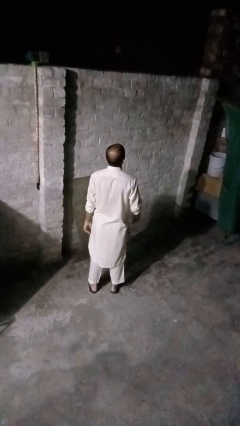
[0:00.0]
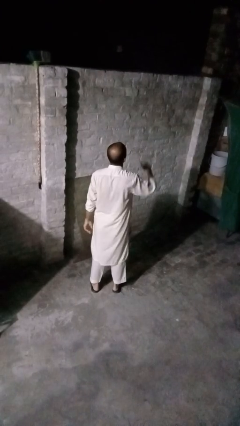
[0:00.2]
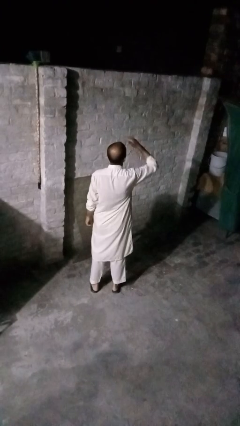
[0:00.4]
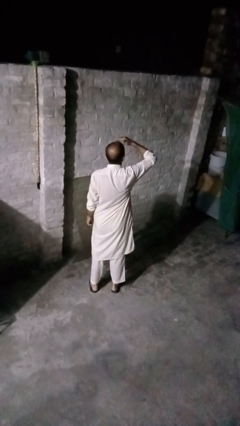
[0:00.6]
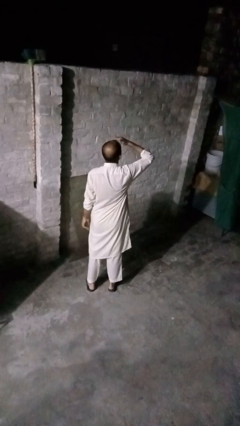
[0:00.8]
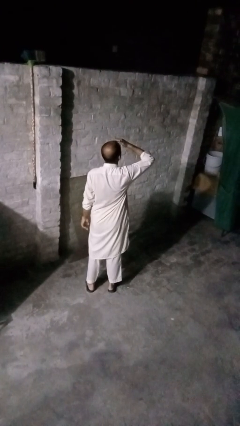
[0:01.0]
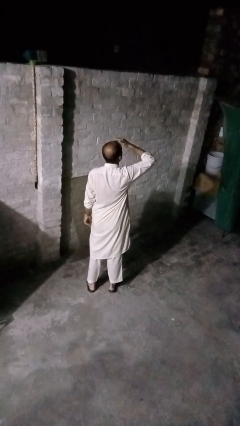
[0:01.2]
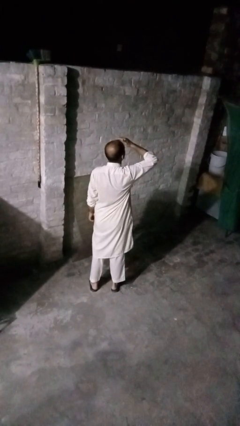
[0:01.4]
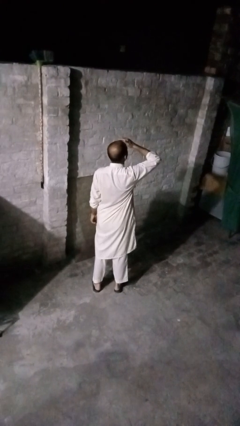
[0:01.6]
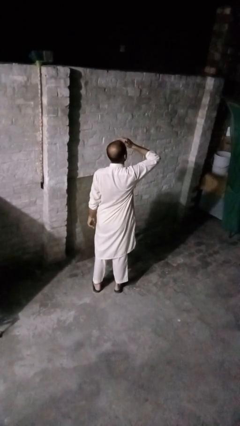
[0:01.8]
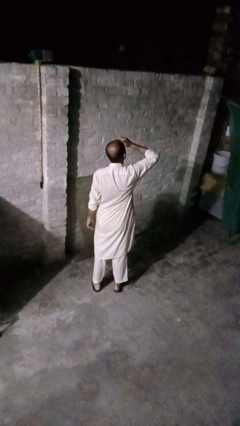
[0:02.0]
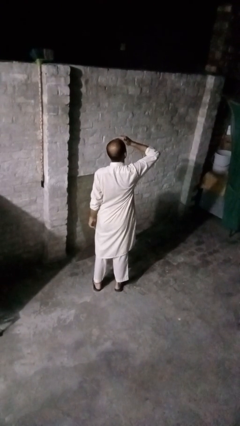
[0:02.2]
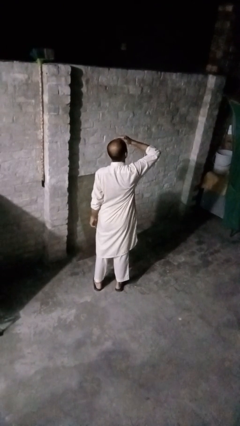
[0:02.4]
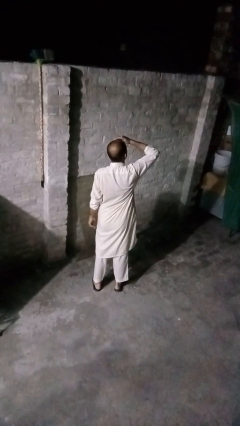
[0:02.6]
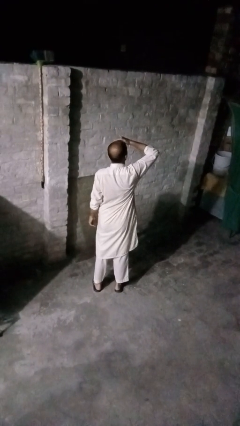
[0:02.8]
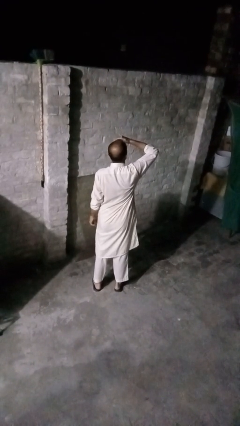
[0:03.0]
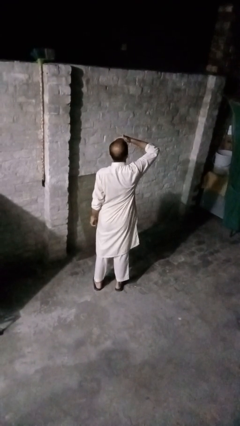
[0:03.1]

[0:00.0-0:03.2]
person shades eyes

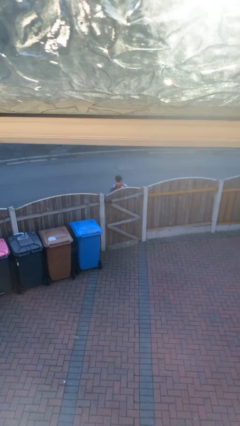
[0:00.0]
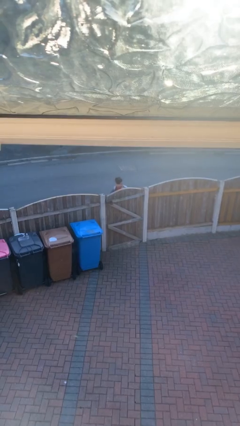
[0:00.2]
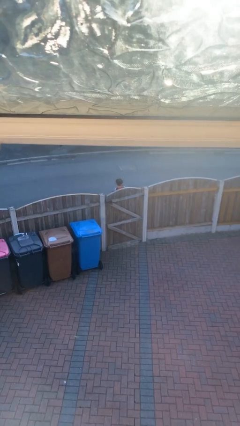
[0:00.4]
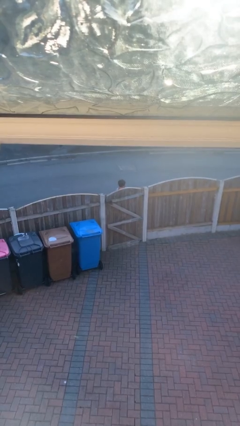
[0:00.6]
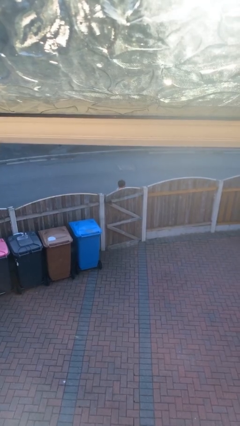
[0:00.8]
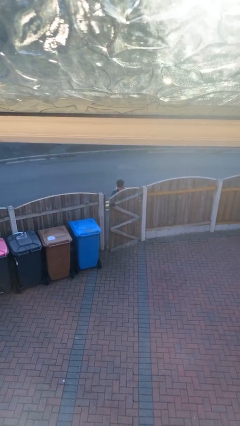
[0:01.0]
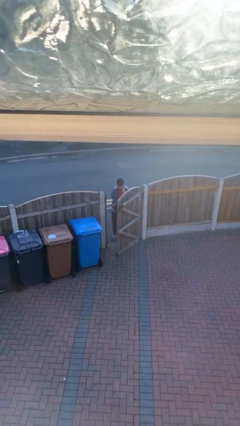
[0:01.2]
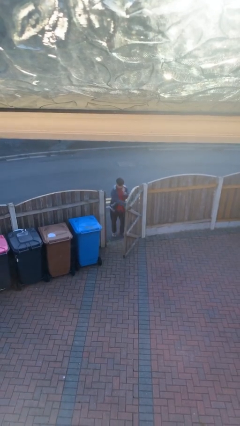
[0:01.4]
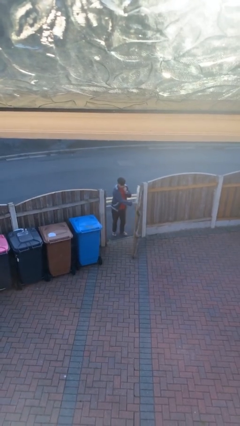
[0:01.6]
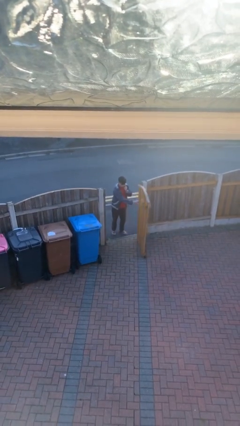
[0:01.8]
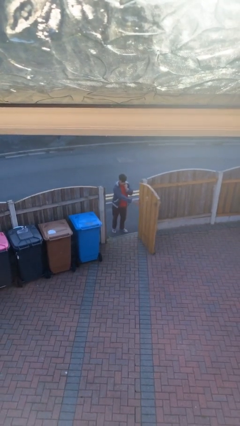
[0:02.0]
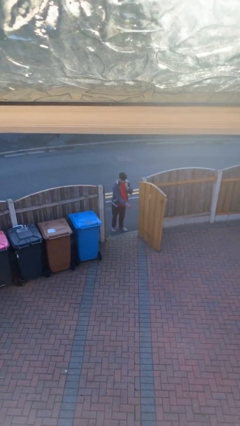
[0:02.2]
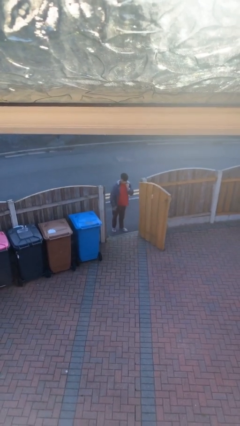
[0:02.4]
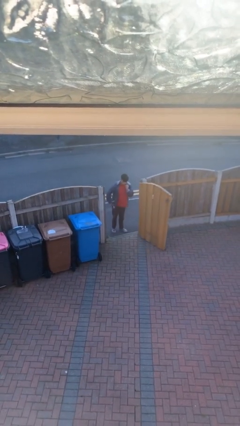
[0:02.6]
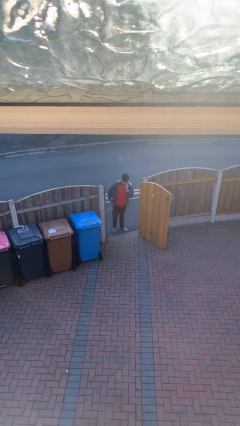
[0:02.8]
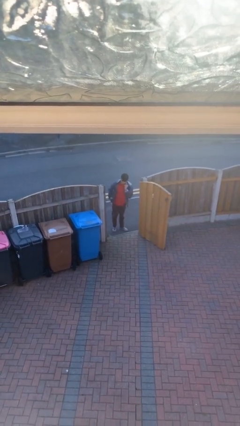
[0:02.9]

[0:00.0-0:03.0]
person opens facility door

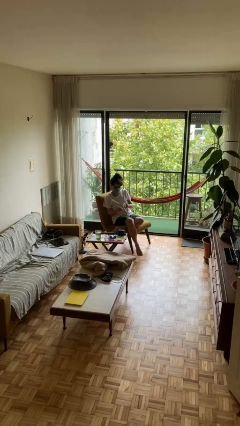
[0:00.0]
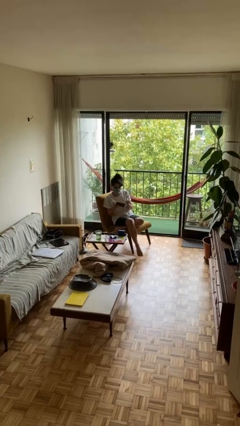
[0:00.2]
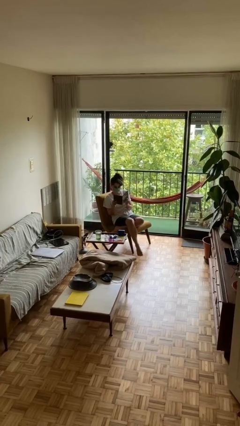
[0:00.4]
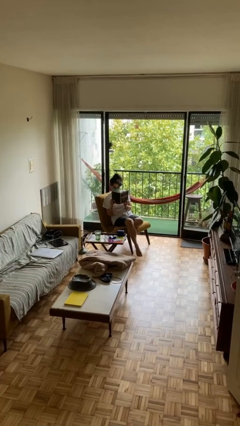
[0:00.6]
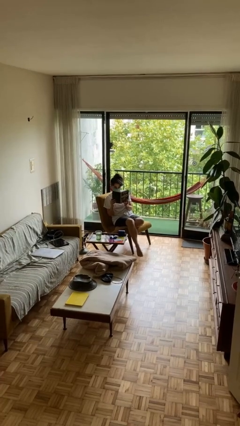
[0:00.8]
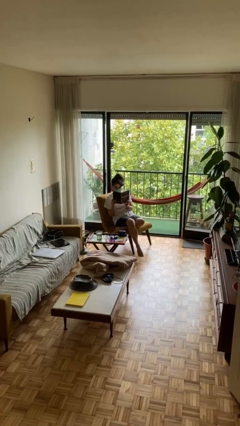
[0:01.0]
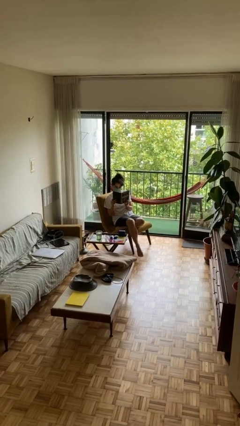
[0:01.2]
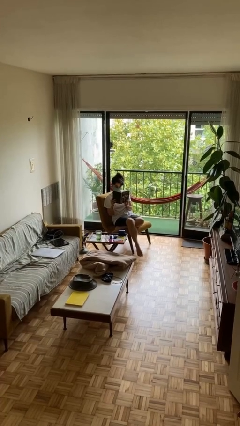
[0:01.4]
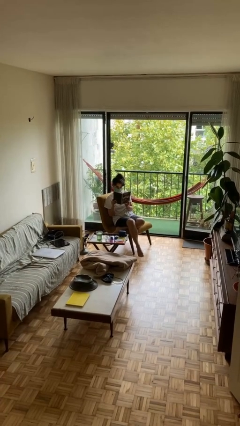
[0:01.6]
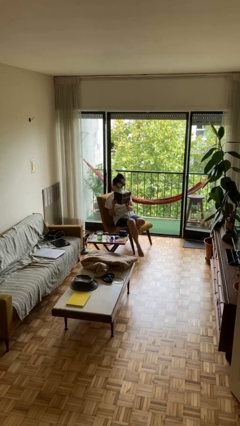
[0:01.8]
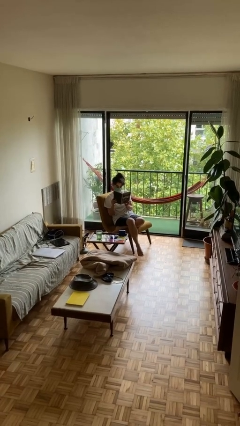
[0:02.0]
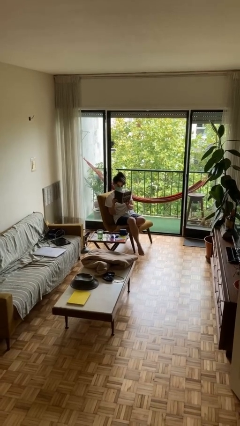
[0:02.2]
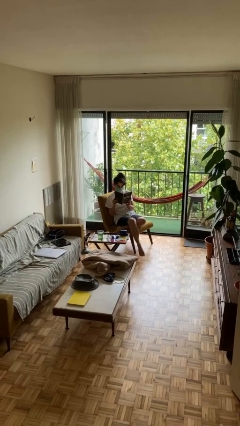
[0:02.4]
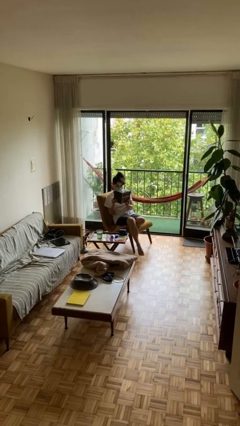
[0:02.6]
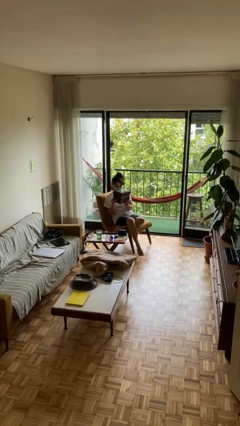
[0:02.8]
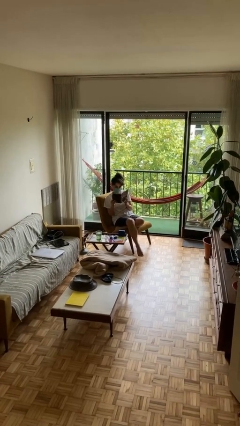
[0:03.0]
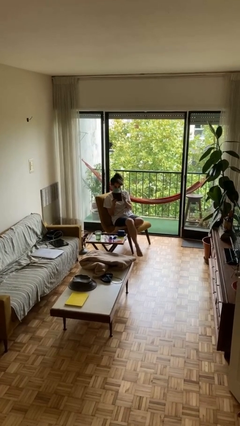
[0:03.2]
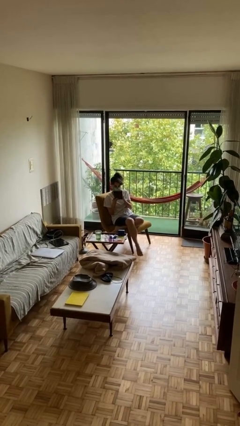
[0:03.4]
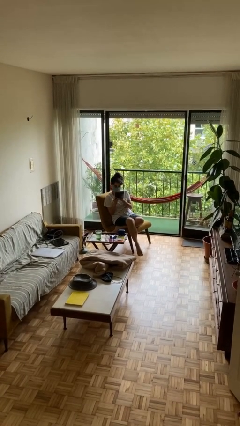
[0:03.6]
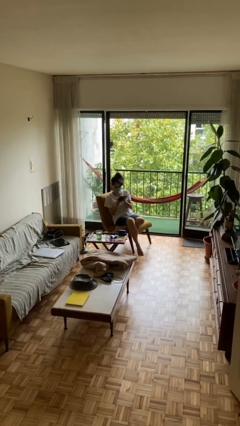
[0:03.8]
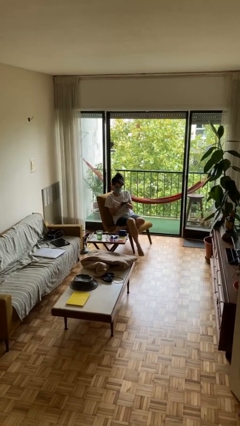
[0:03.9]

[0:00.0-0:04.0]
person reads document

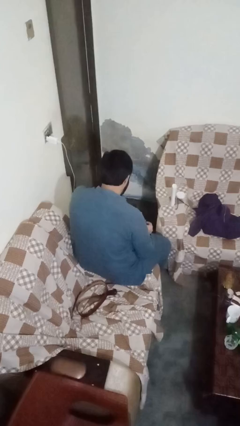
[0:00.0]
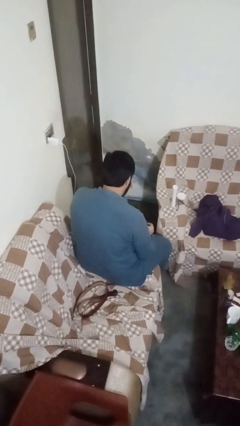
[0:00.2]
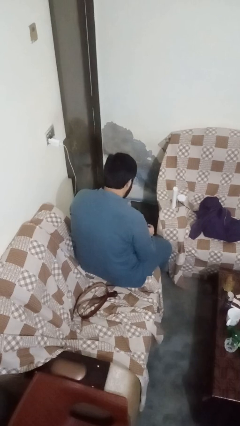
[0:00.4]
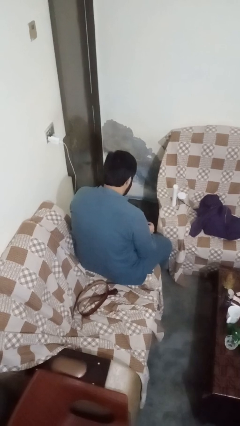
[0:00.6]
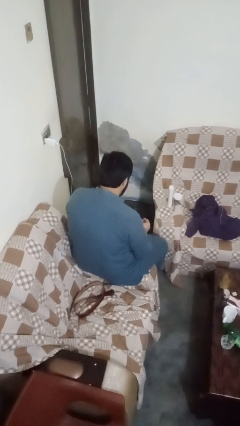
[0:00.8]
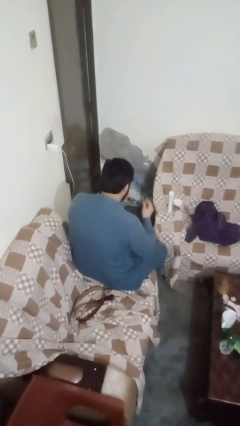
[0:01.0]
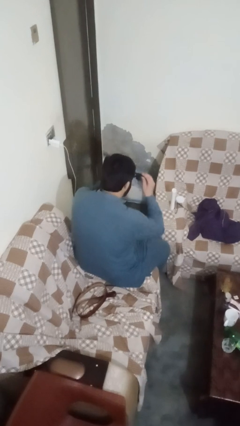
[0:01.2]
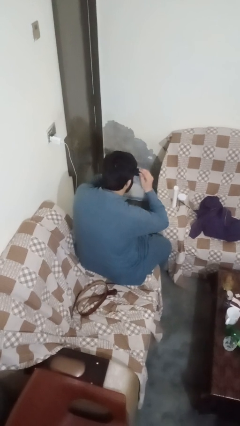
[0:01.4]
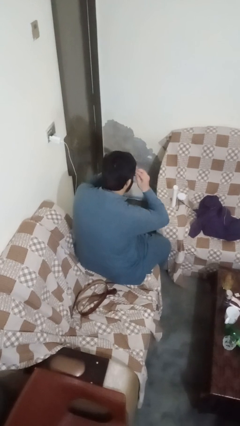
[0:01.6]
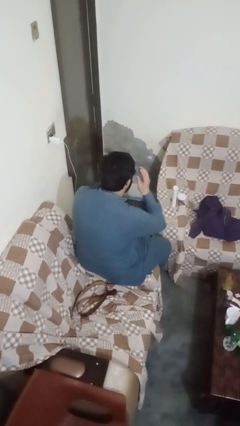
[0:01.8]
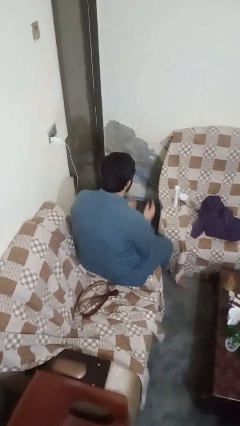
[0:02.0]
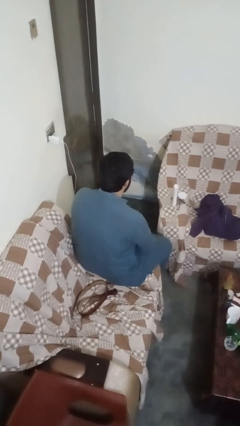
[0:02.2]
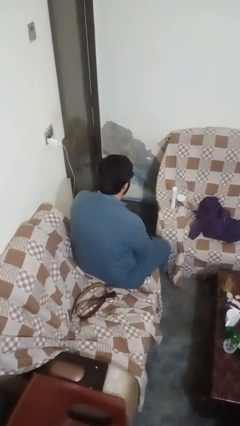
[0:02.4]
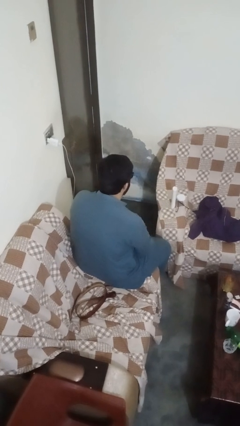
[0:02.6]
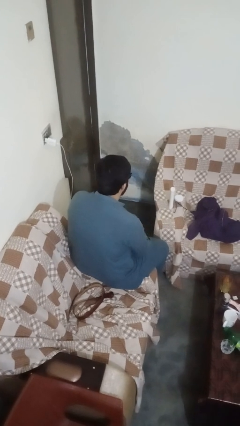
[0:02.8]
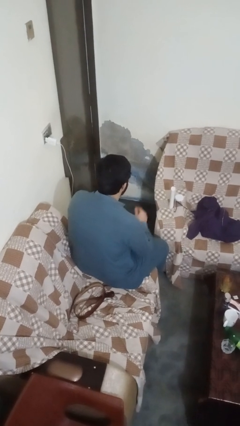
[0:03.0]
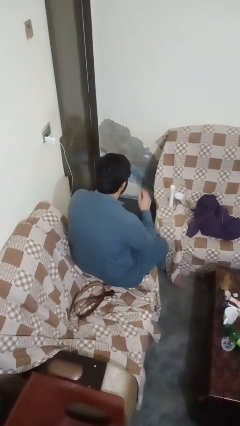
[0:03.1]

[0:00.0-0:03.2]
person puts on sunglasses

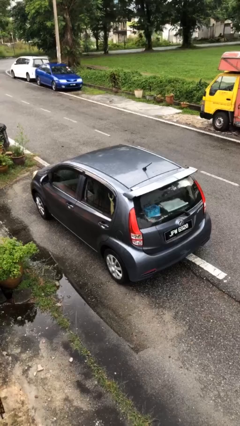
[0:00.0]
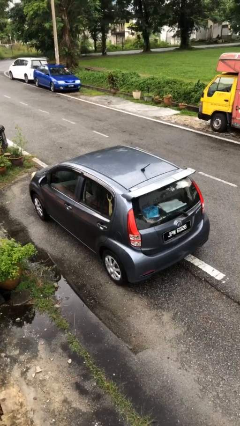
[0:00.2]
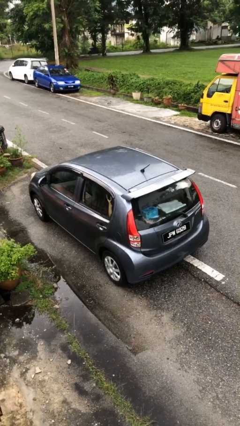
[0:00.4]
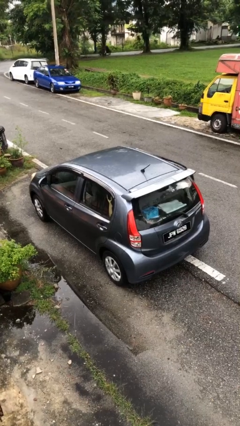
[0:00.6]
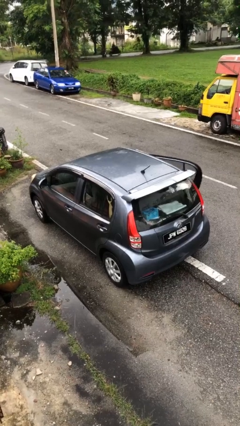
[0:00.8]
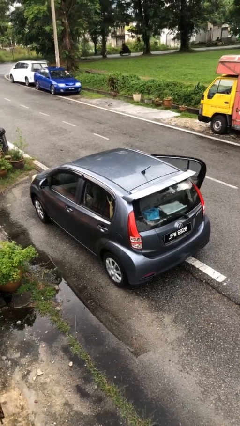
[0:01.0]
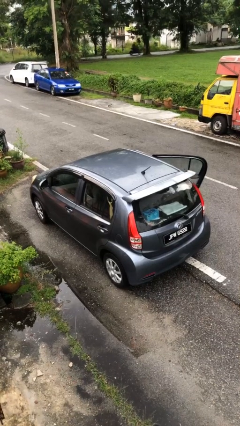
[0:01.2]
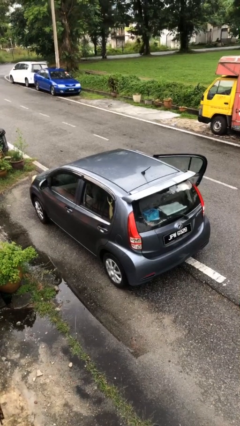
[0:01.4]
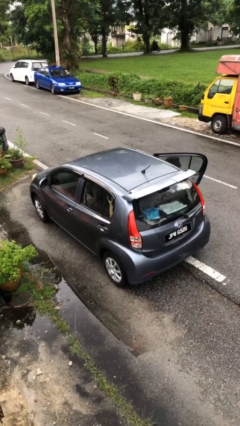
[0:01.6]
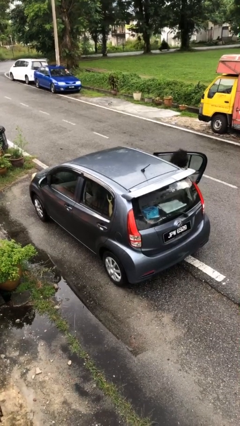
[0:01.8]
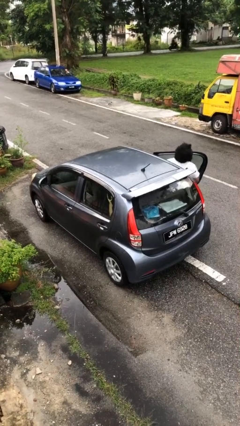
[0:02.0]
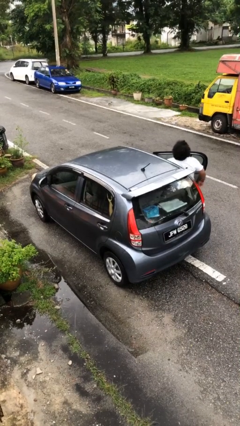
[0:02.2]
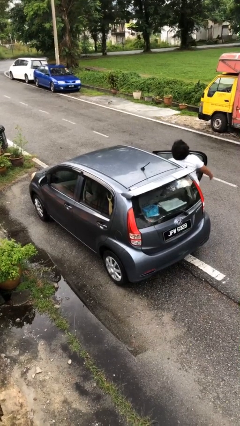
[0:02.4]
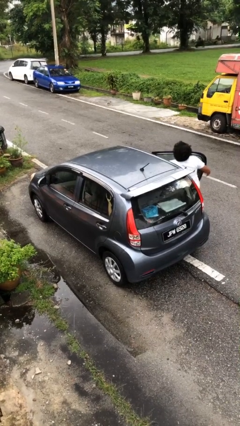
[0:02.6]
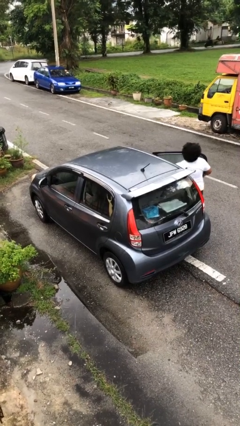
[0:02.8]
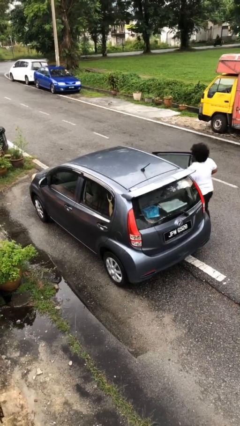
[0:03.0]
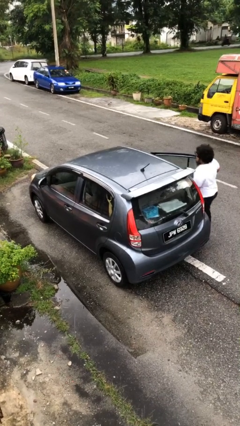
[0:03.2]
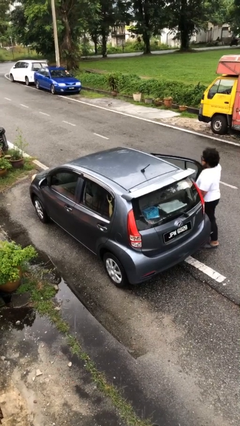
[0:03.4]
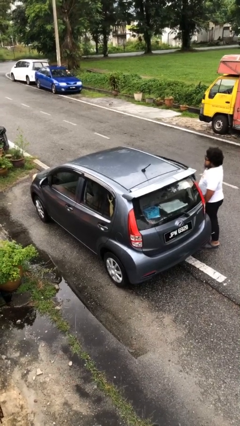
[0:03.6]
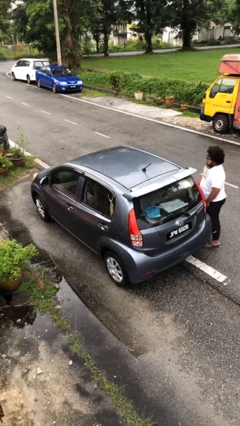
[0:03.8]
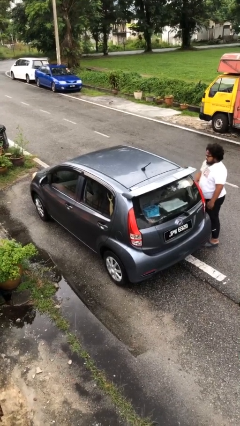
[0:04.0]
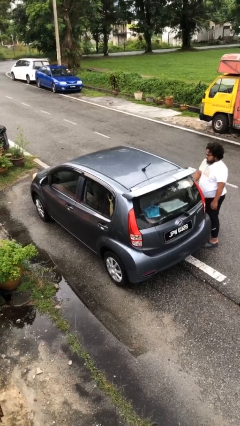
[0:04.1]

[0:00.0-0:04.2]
car drops off person
